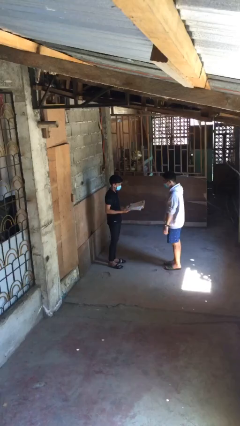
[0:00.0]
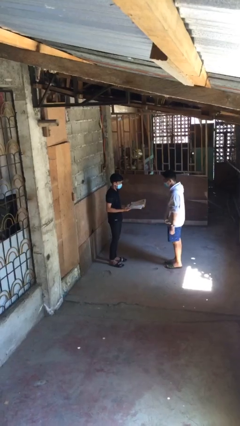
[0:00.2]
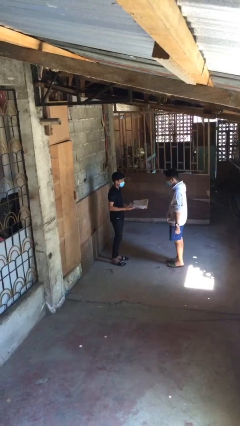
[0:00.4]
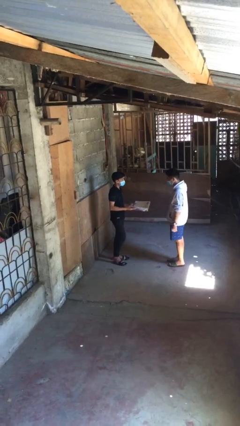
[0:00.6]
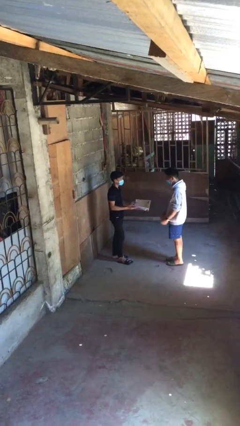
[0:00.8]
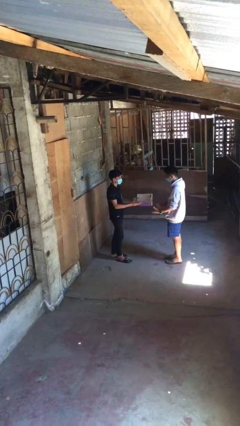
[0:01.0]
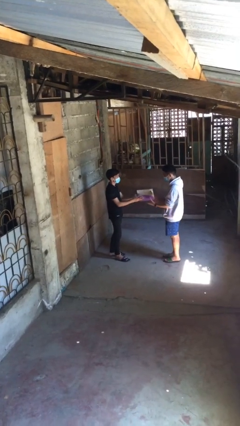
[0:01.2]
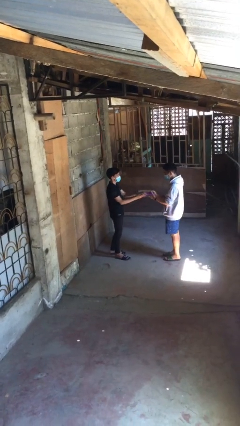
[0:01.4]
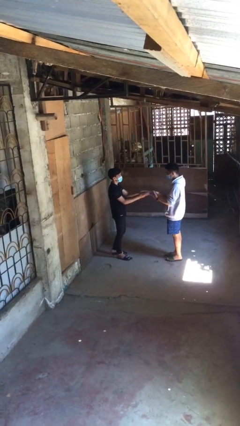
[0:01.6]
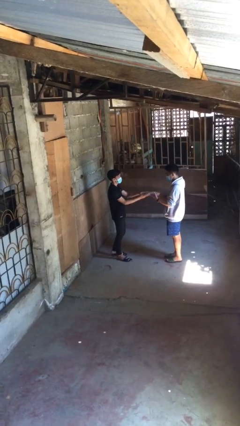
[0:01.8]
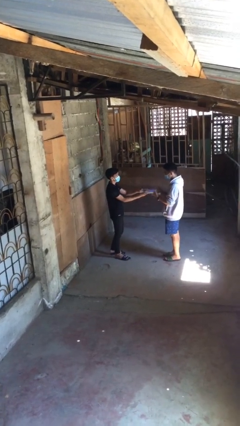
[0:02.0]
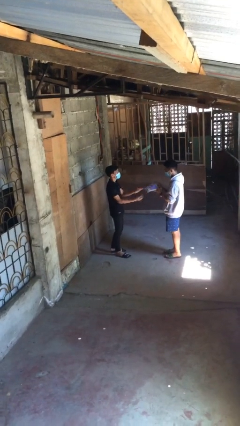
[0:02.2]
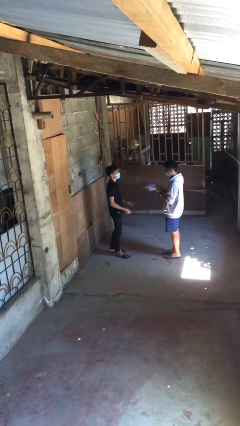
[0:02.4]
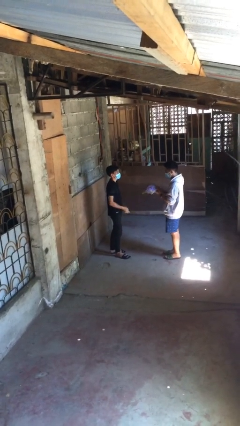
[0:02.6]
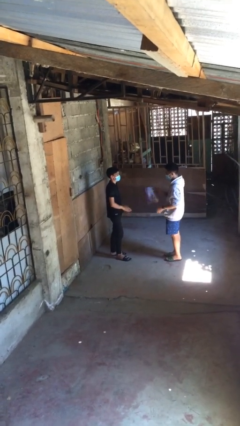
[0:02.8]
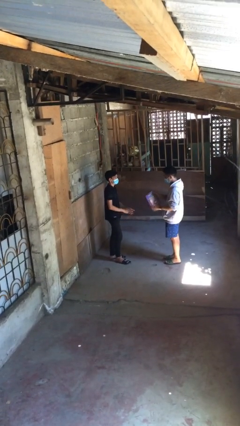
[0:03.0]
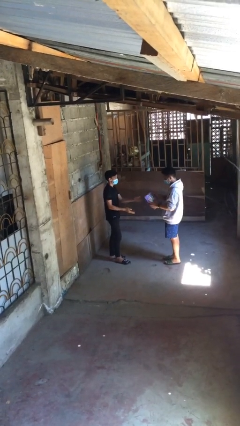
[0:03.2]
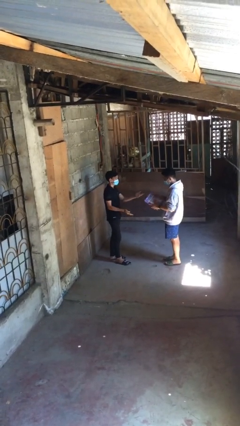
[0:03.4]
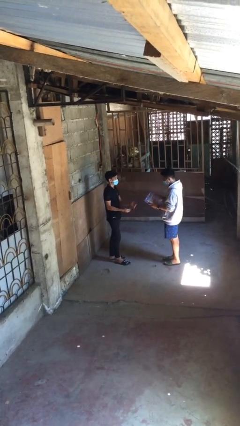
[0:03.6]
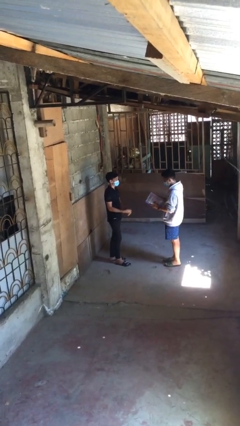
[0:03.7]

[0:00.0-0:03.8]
person transfers object to person

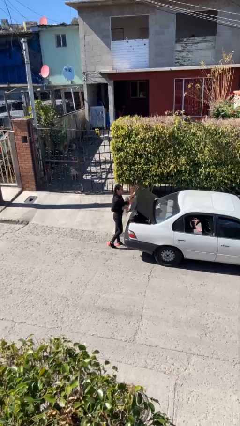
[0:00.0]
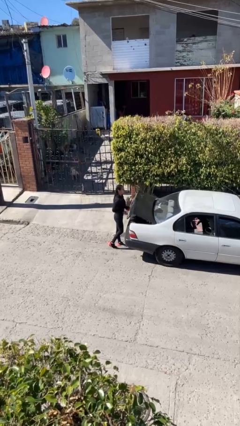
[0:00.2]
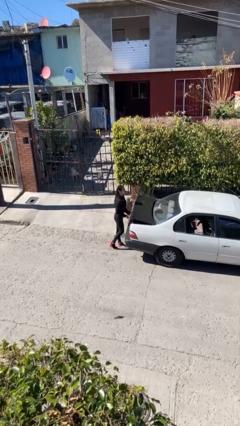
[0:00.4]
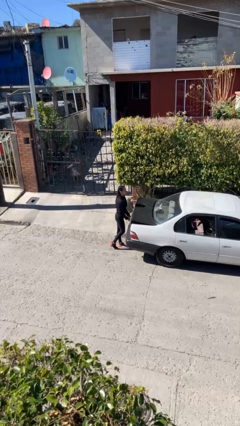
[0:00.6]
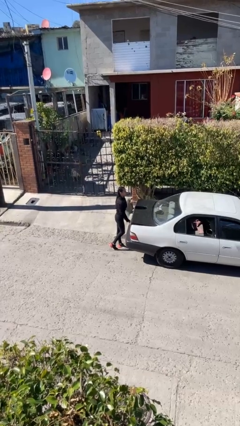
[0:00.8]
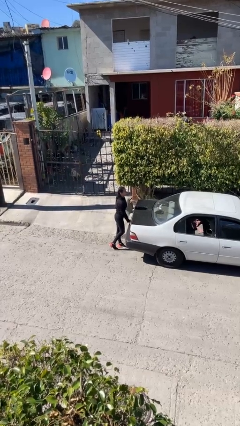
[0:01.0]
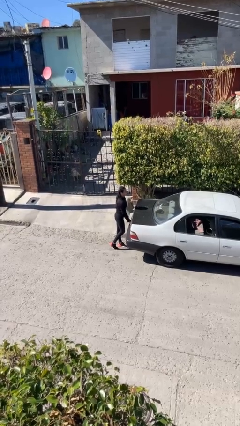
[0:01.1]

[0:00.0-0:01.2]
person closes car trunk

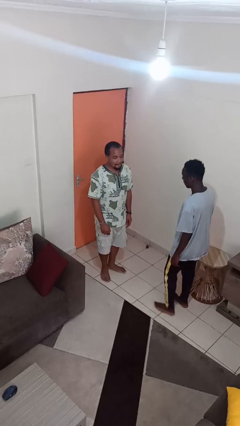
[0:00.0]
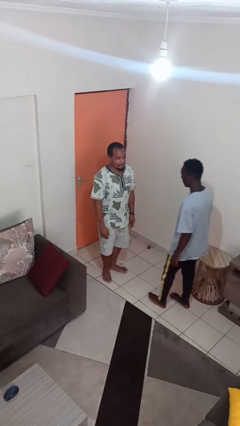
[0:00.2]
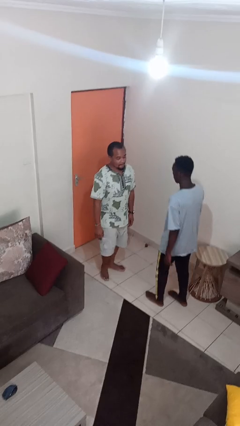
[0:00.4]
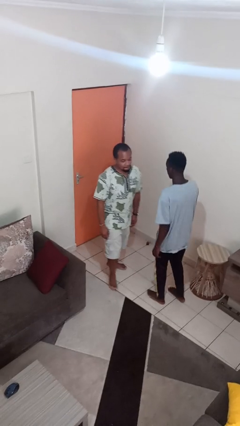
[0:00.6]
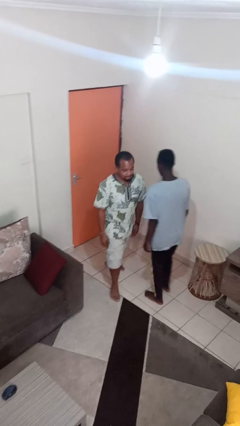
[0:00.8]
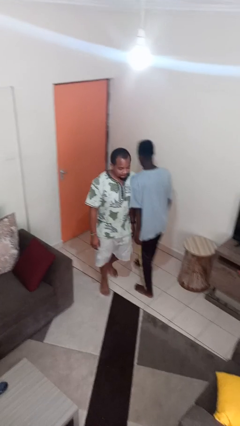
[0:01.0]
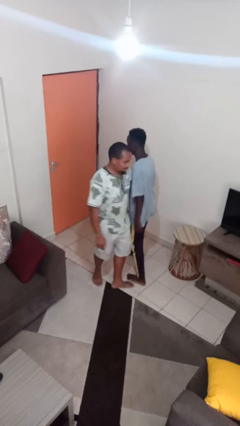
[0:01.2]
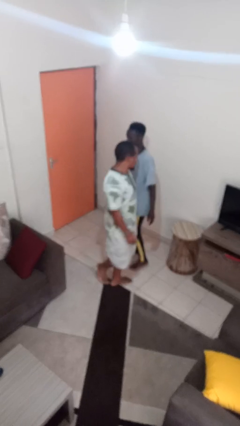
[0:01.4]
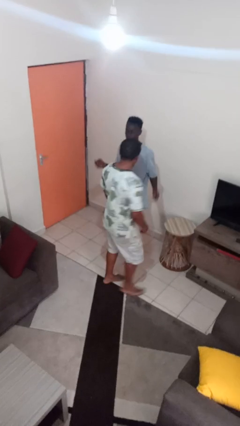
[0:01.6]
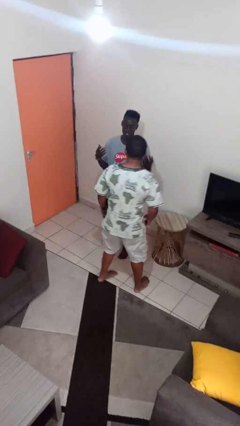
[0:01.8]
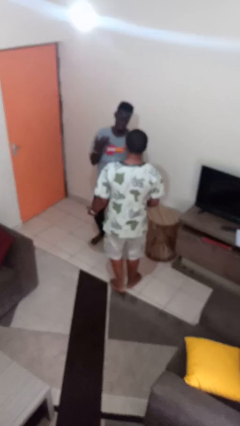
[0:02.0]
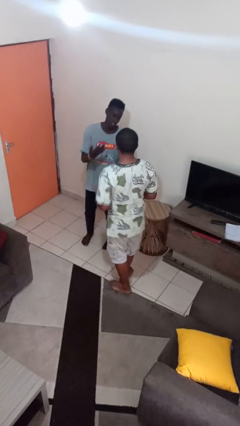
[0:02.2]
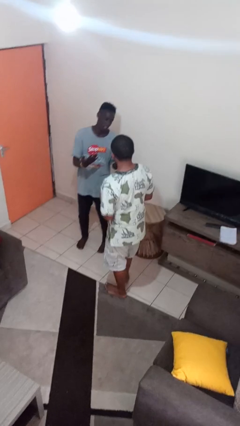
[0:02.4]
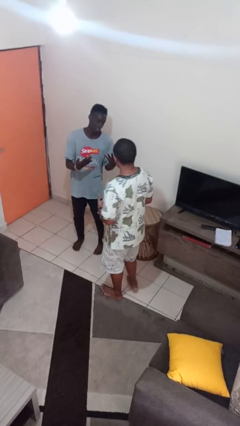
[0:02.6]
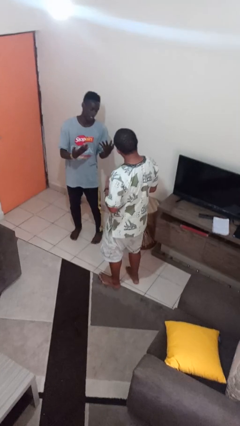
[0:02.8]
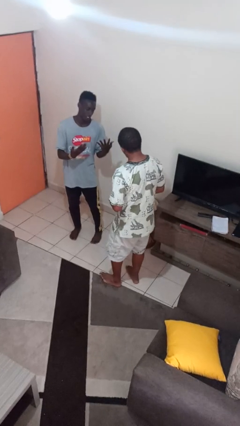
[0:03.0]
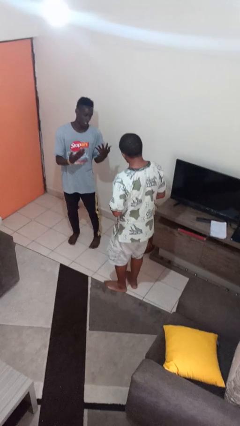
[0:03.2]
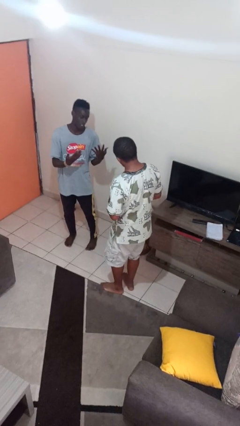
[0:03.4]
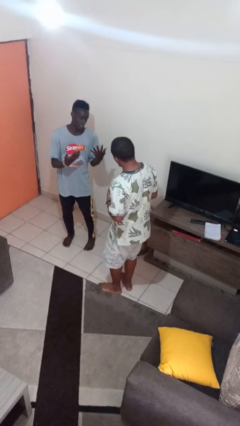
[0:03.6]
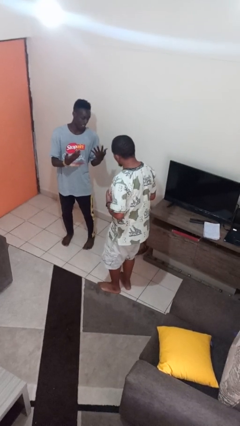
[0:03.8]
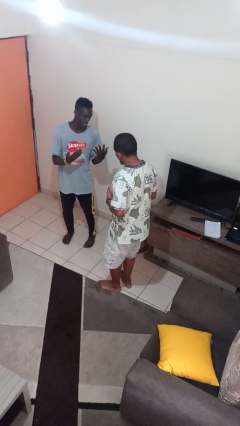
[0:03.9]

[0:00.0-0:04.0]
person bumps into person

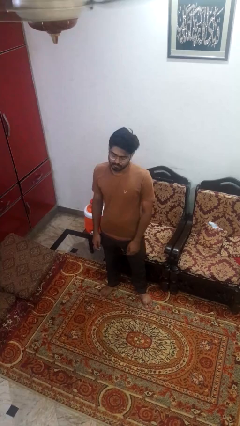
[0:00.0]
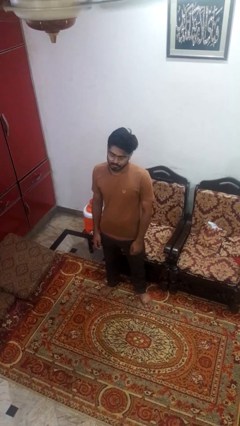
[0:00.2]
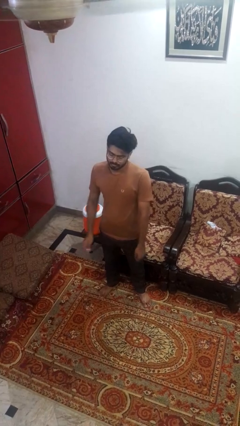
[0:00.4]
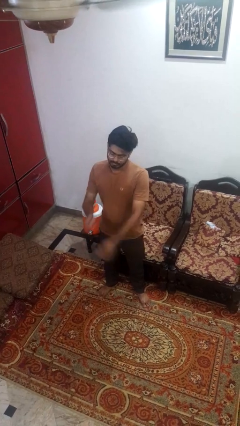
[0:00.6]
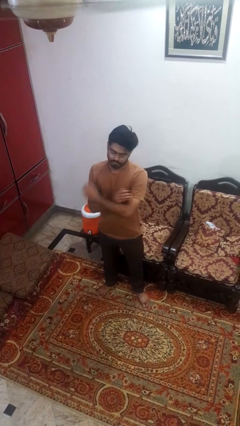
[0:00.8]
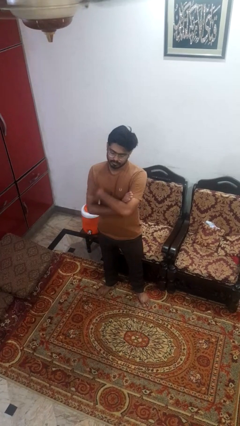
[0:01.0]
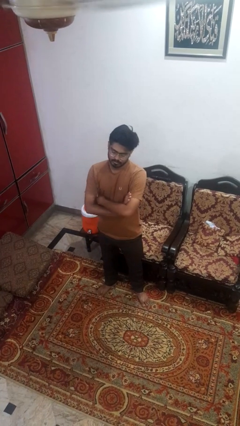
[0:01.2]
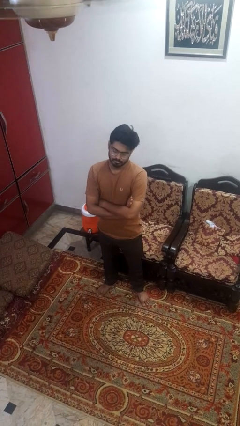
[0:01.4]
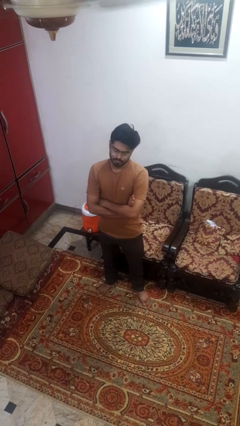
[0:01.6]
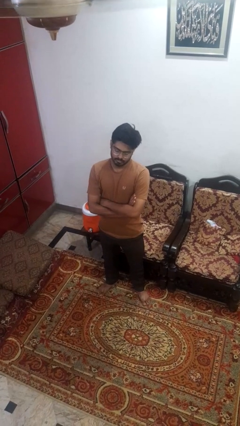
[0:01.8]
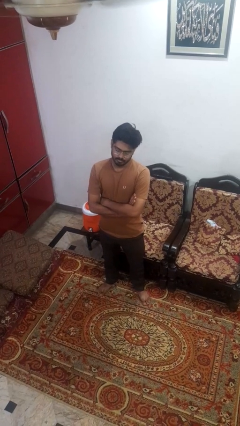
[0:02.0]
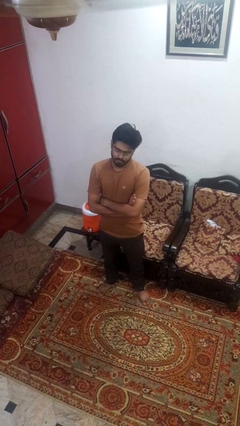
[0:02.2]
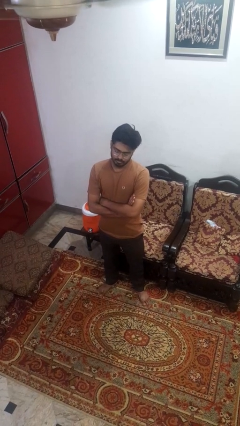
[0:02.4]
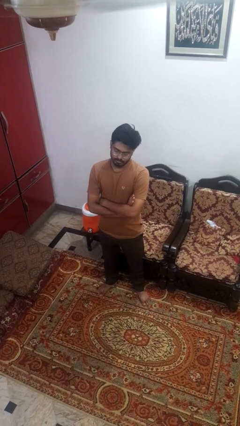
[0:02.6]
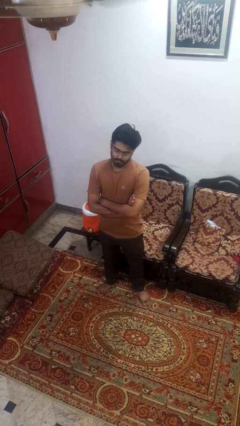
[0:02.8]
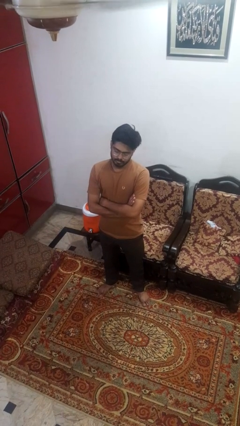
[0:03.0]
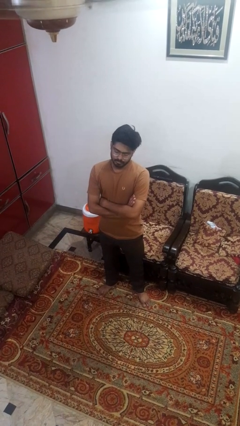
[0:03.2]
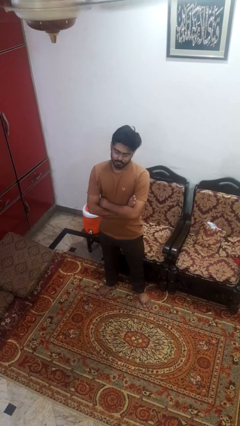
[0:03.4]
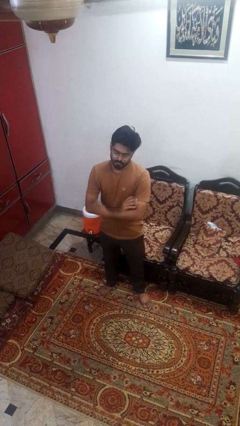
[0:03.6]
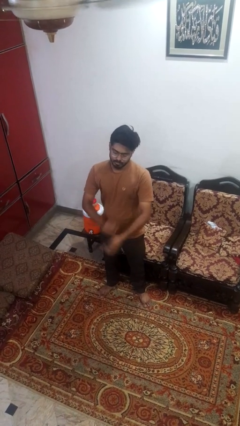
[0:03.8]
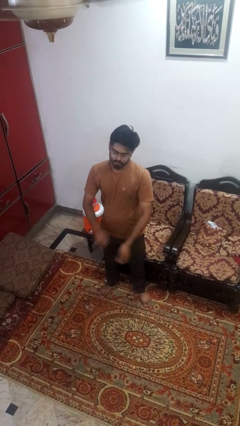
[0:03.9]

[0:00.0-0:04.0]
person crosses arms

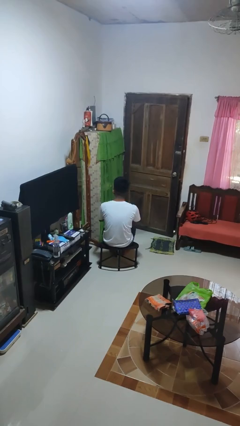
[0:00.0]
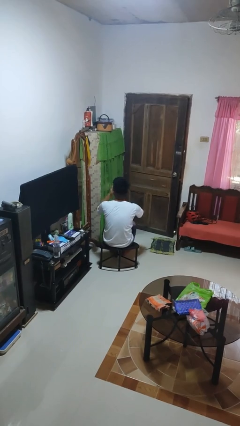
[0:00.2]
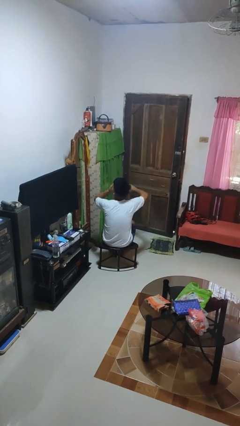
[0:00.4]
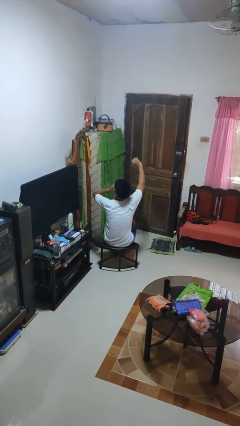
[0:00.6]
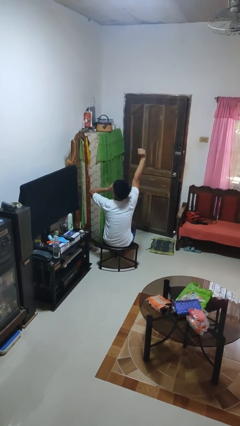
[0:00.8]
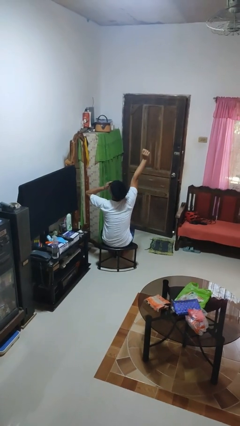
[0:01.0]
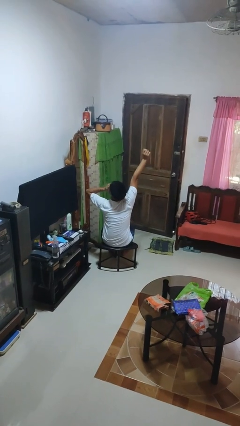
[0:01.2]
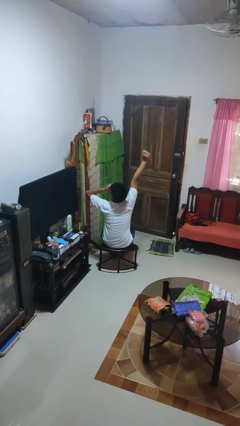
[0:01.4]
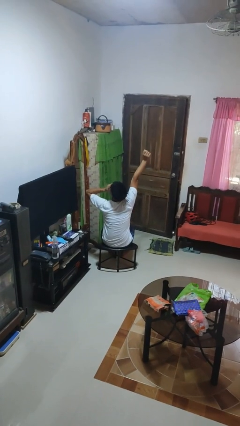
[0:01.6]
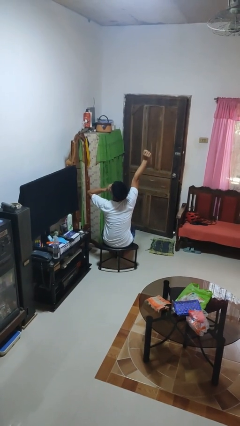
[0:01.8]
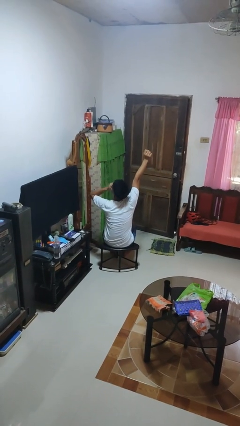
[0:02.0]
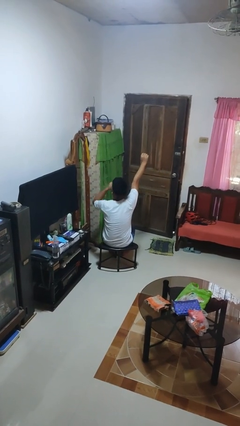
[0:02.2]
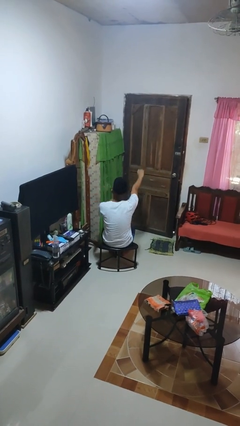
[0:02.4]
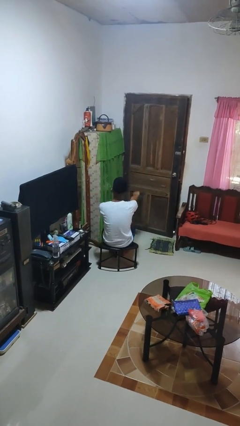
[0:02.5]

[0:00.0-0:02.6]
person yawns

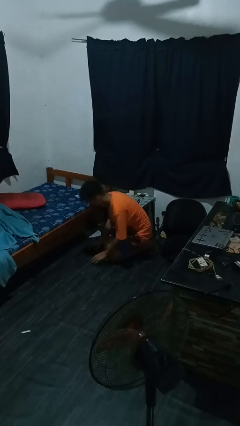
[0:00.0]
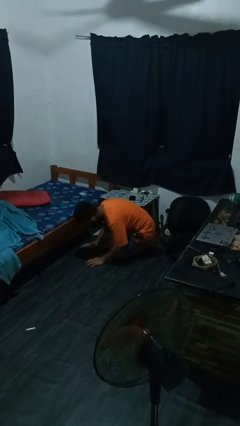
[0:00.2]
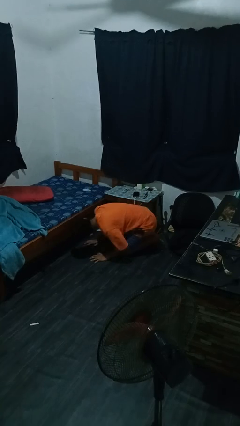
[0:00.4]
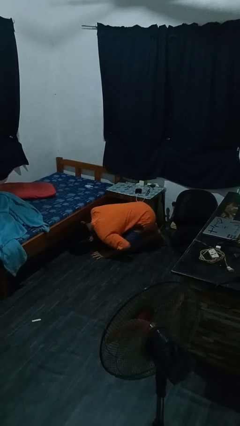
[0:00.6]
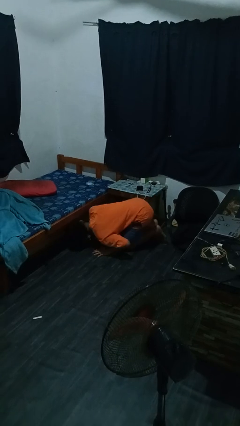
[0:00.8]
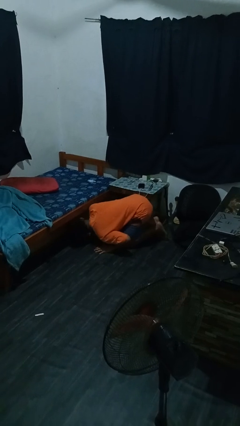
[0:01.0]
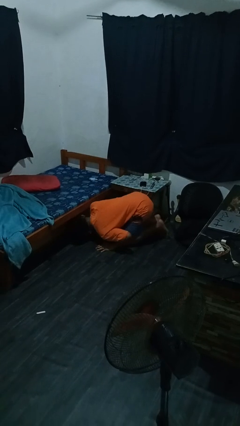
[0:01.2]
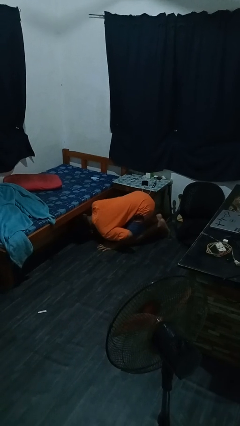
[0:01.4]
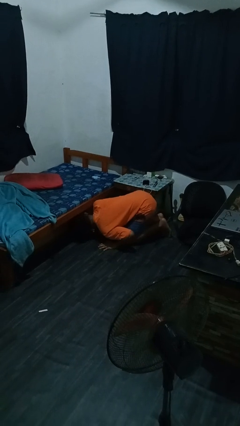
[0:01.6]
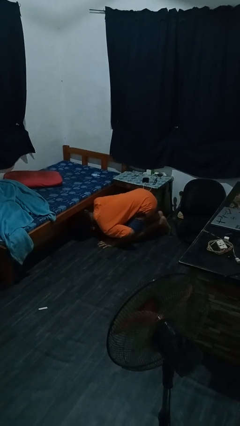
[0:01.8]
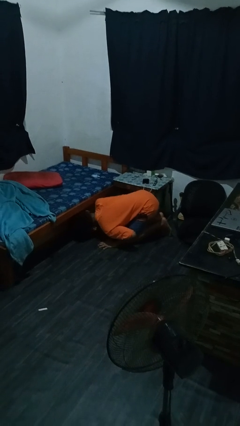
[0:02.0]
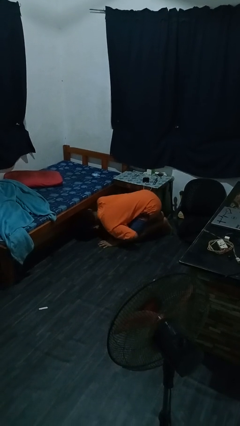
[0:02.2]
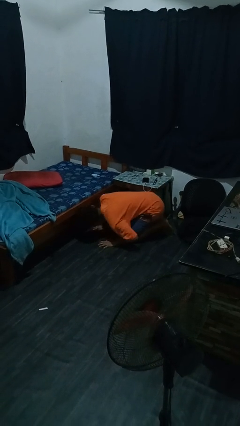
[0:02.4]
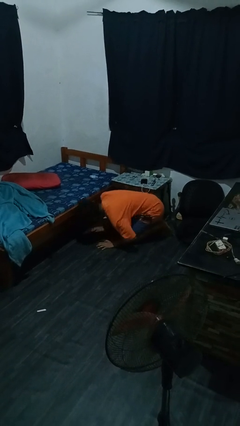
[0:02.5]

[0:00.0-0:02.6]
person searches under bed
